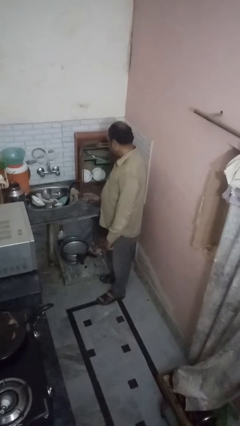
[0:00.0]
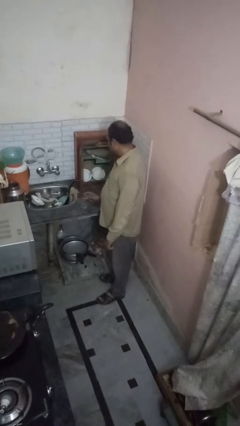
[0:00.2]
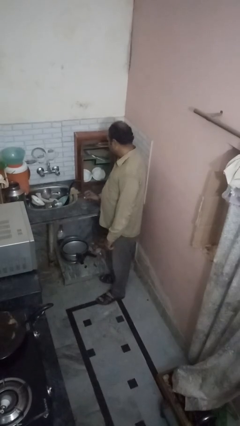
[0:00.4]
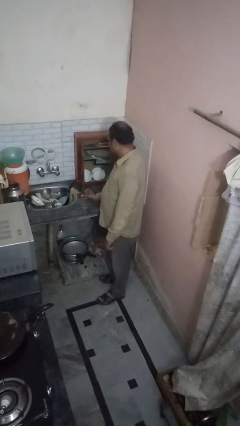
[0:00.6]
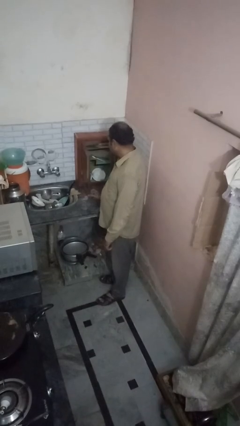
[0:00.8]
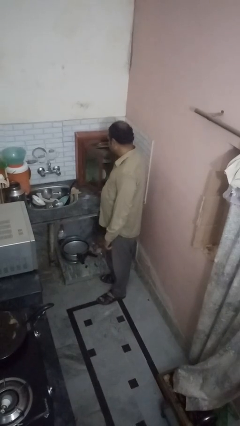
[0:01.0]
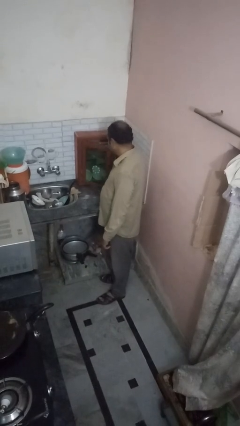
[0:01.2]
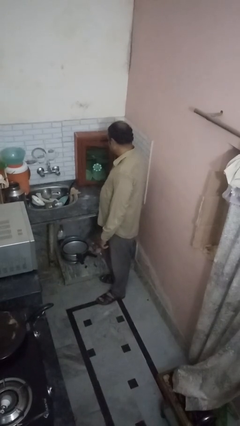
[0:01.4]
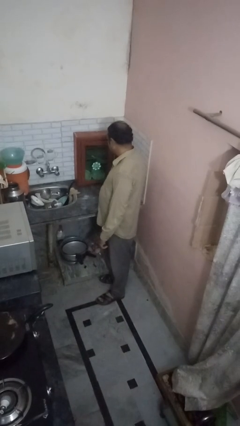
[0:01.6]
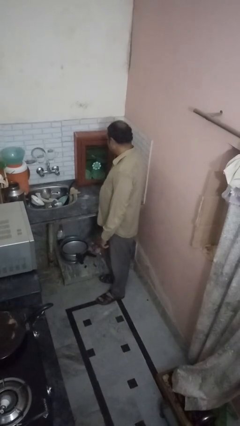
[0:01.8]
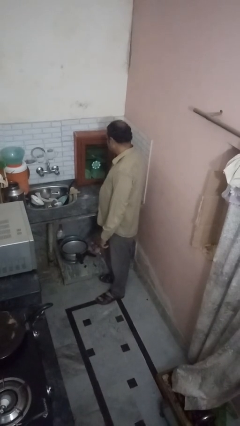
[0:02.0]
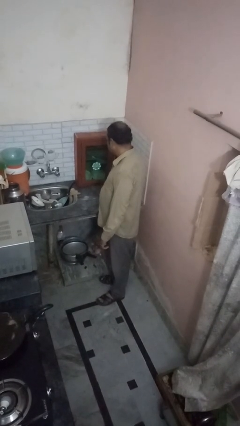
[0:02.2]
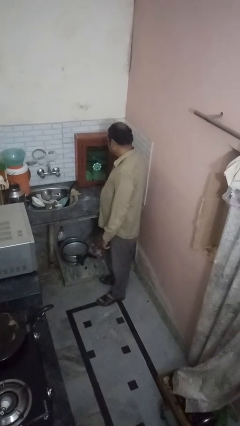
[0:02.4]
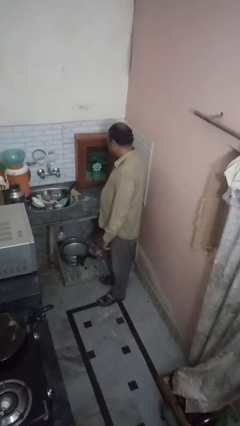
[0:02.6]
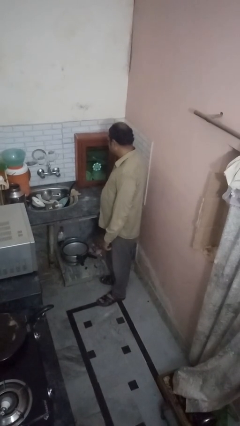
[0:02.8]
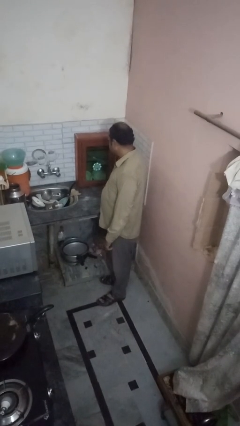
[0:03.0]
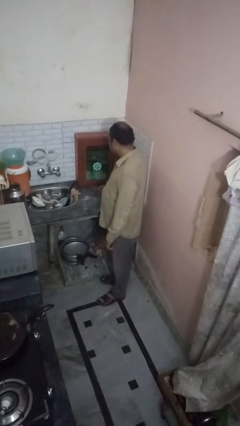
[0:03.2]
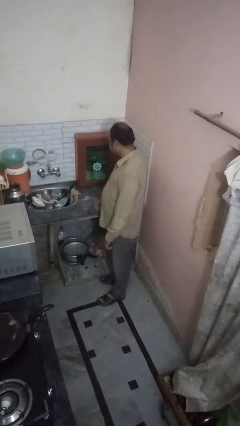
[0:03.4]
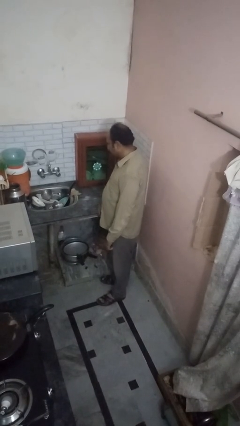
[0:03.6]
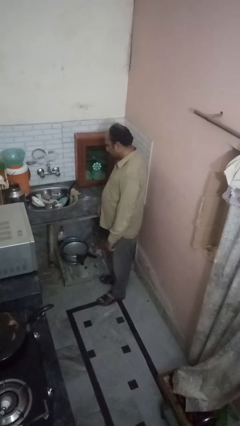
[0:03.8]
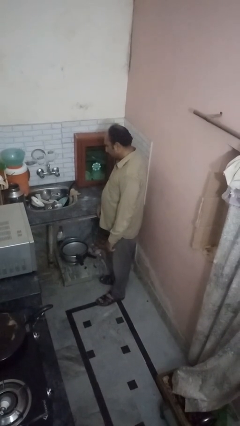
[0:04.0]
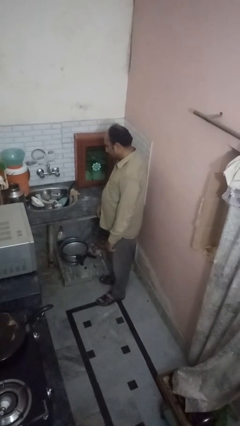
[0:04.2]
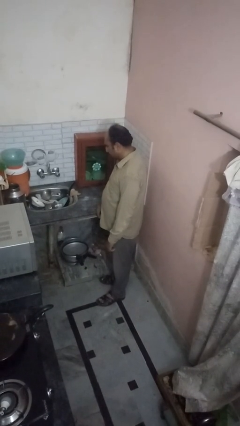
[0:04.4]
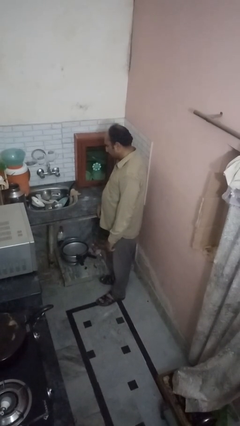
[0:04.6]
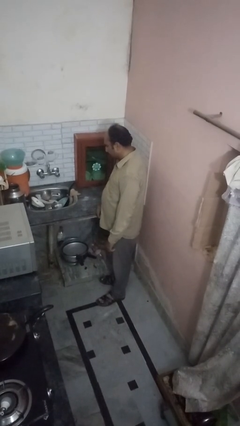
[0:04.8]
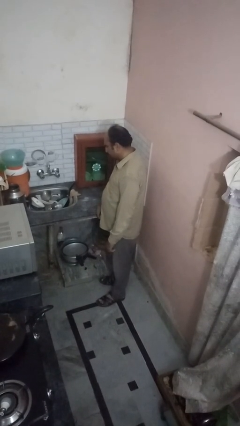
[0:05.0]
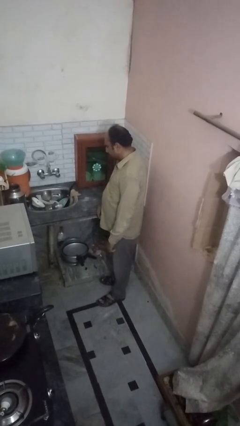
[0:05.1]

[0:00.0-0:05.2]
person closes cabinet

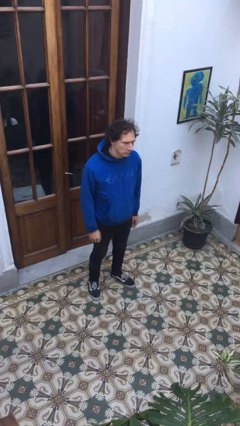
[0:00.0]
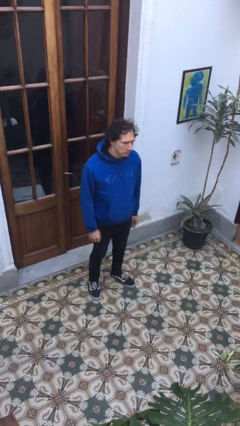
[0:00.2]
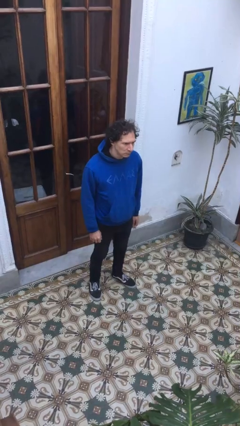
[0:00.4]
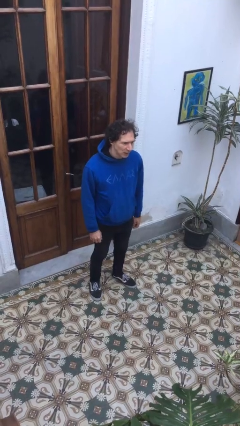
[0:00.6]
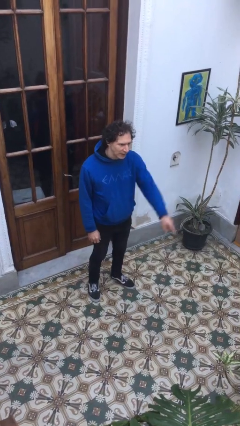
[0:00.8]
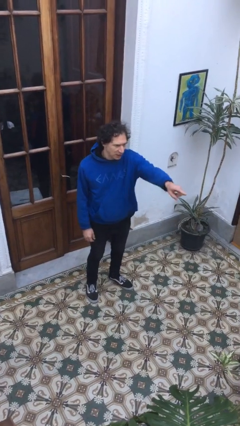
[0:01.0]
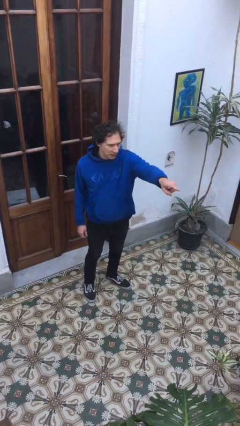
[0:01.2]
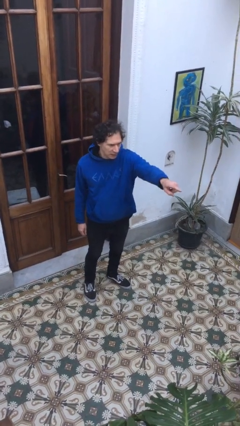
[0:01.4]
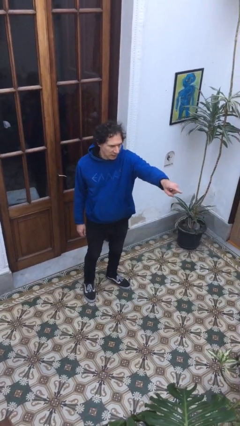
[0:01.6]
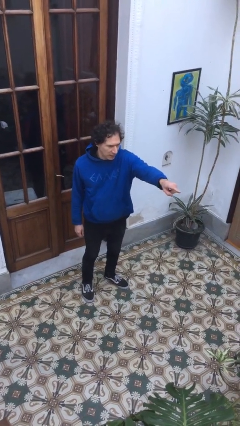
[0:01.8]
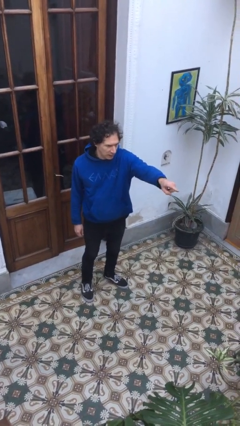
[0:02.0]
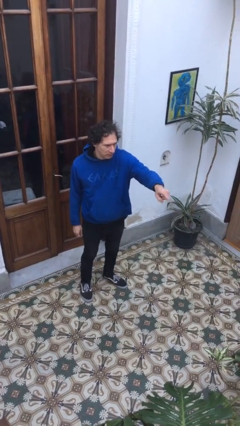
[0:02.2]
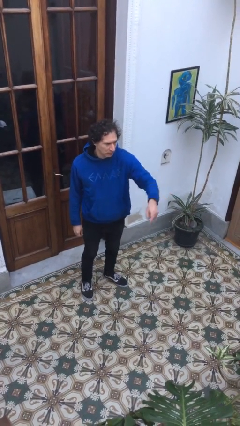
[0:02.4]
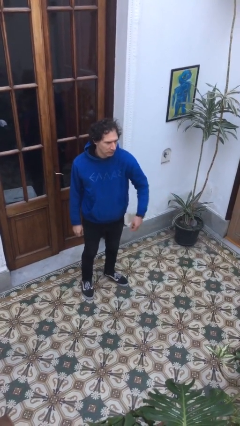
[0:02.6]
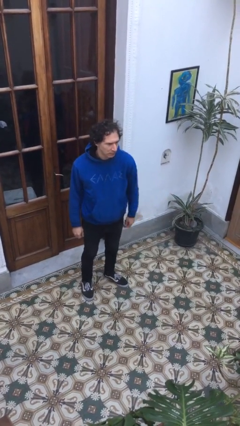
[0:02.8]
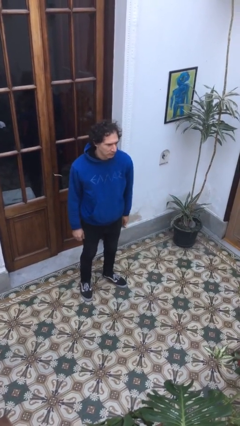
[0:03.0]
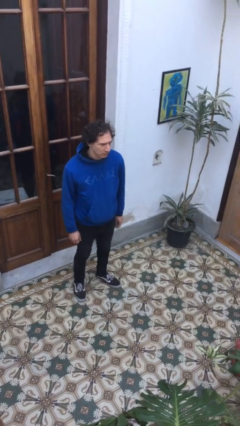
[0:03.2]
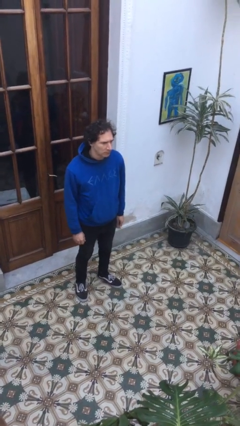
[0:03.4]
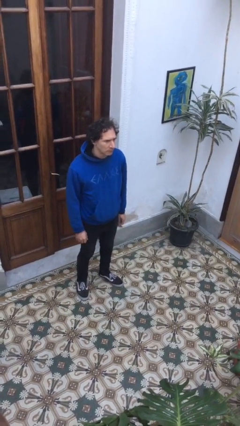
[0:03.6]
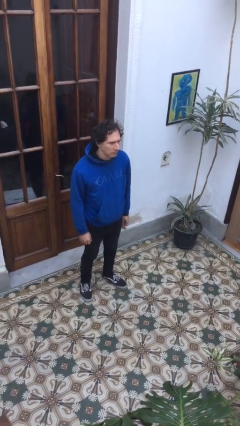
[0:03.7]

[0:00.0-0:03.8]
person points at person

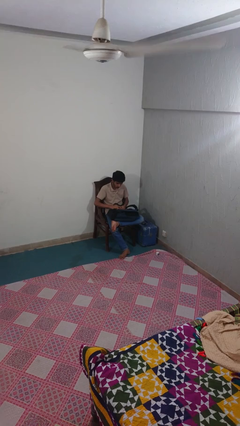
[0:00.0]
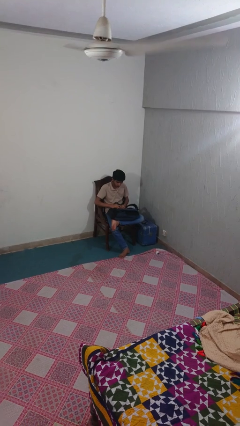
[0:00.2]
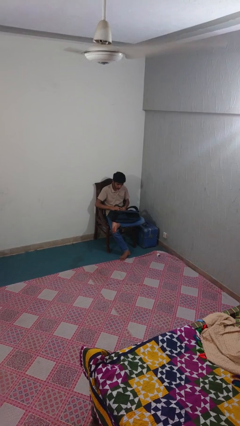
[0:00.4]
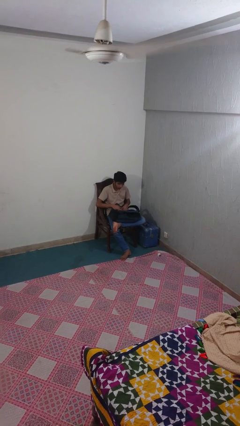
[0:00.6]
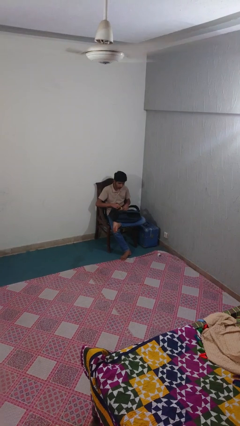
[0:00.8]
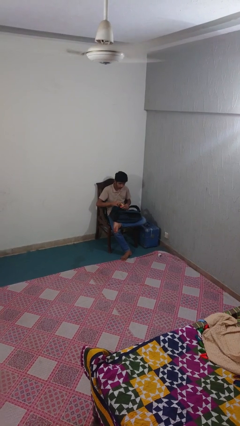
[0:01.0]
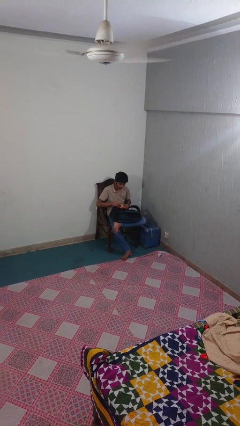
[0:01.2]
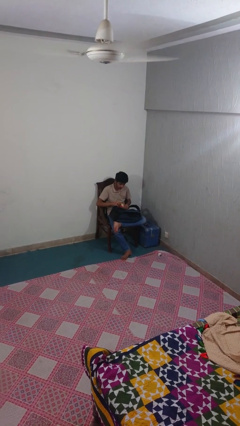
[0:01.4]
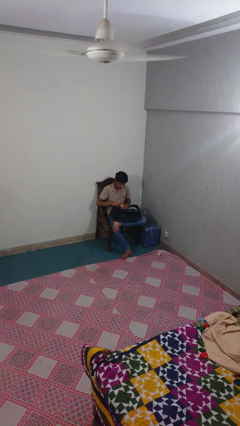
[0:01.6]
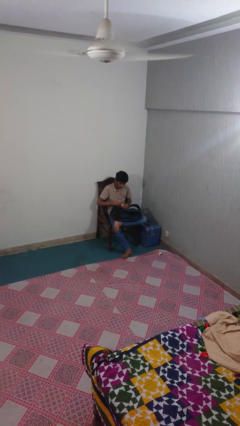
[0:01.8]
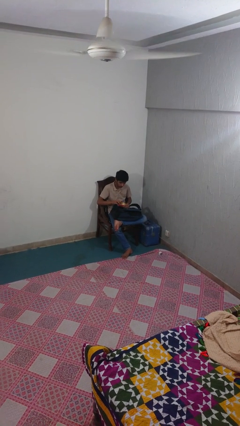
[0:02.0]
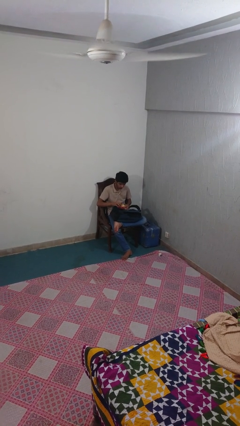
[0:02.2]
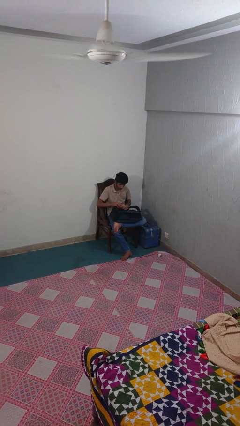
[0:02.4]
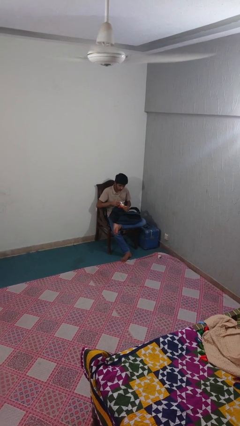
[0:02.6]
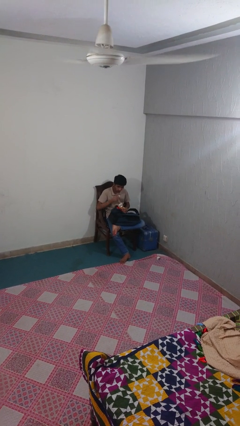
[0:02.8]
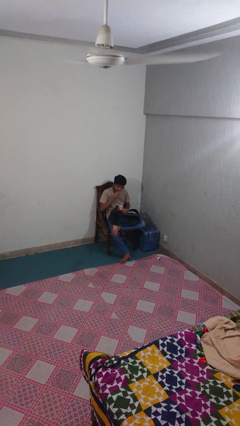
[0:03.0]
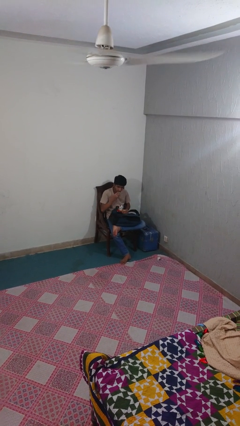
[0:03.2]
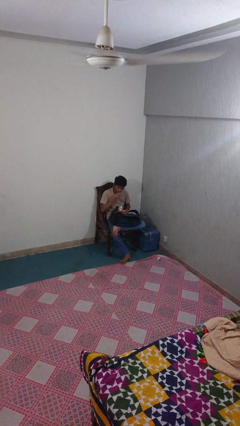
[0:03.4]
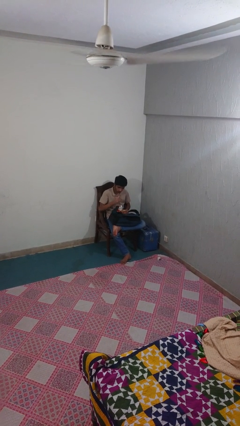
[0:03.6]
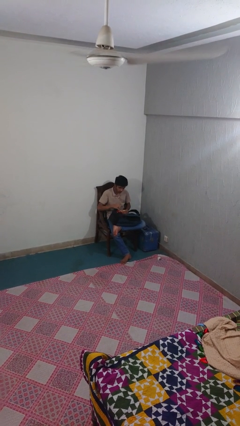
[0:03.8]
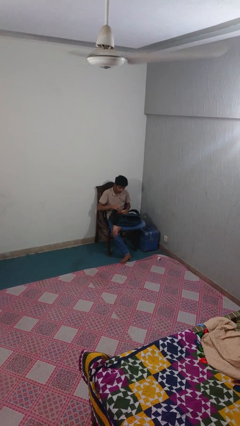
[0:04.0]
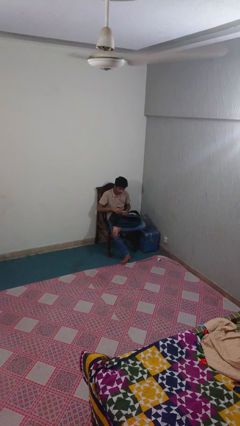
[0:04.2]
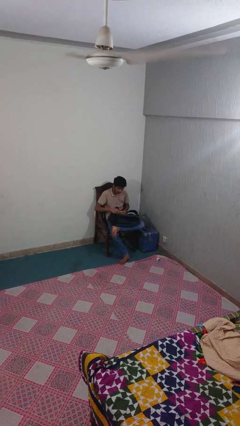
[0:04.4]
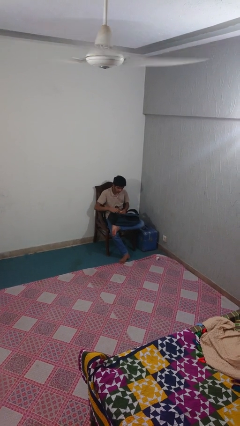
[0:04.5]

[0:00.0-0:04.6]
person eats snack from bag

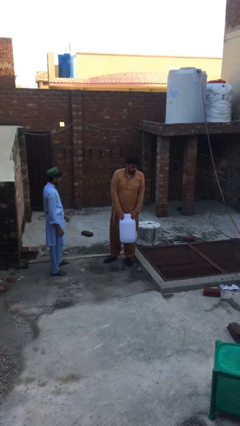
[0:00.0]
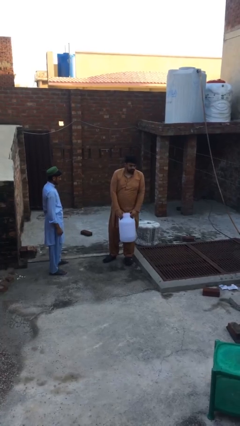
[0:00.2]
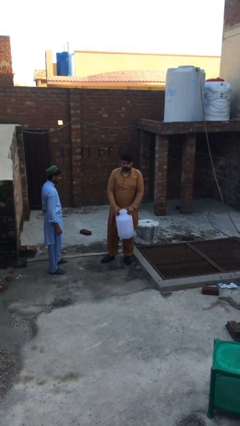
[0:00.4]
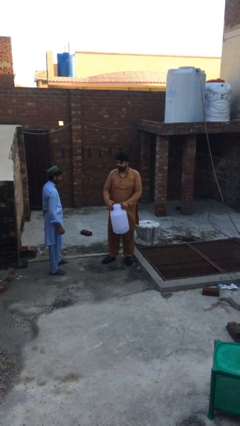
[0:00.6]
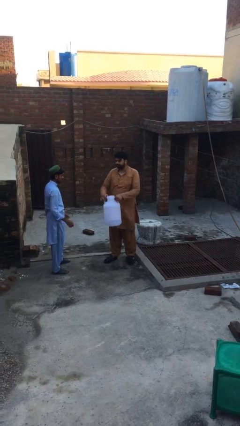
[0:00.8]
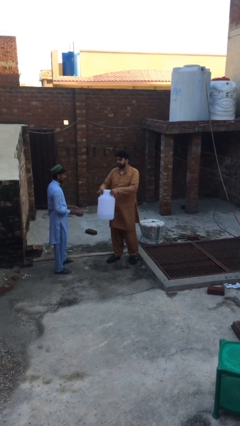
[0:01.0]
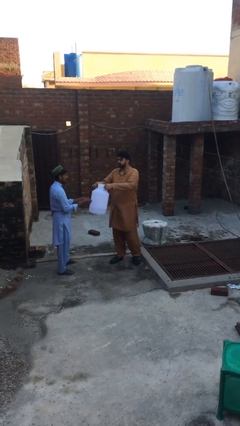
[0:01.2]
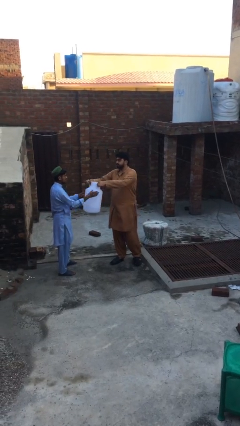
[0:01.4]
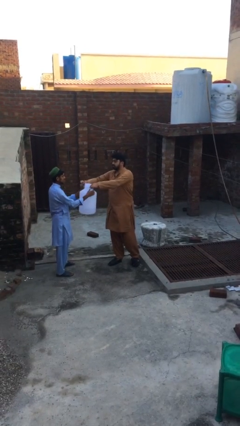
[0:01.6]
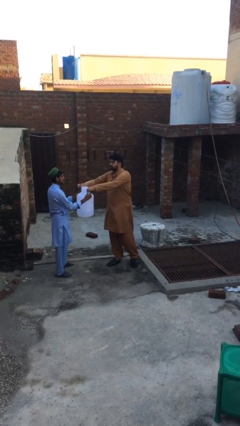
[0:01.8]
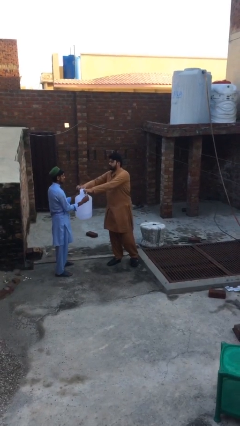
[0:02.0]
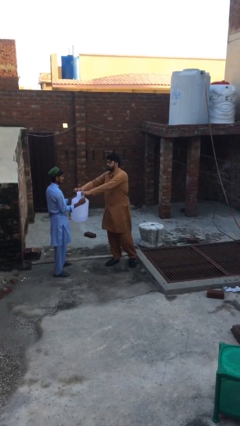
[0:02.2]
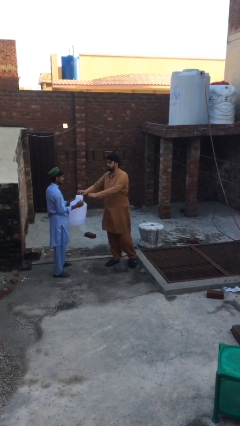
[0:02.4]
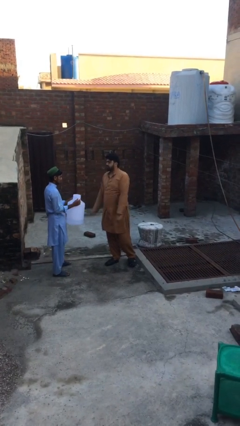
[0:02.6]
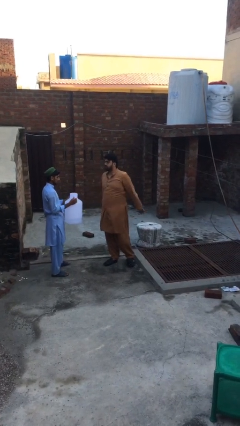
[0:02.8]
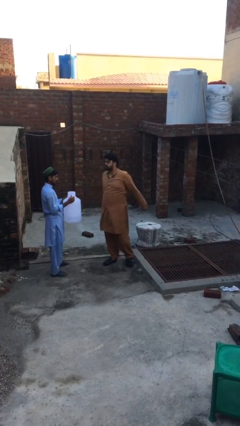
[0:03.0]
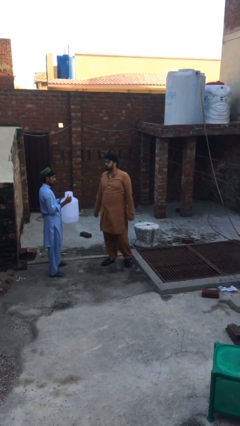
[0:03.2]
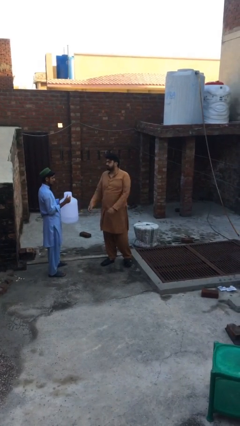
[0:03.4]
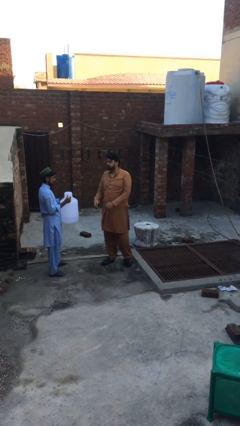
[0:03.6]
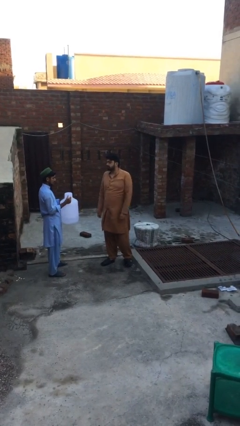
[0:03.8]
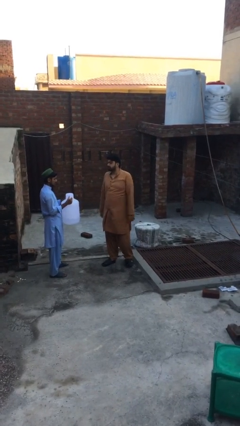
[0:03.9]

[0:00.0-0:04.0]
person transfers object to person
